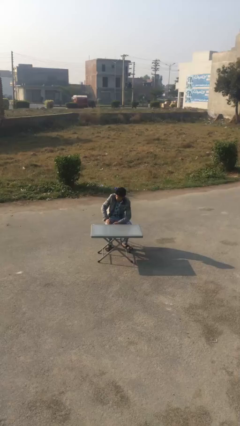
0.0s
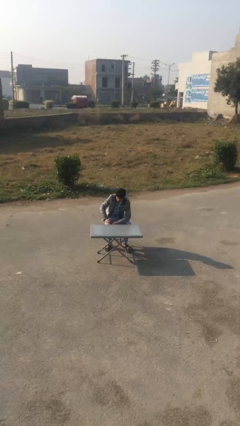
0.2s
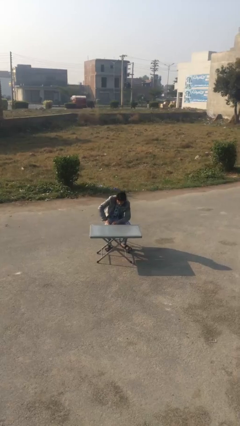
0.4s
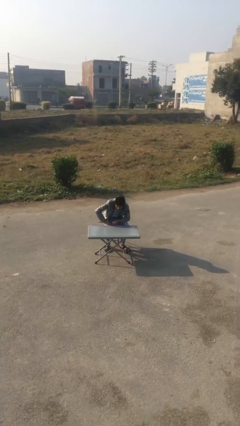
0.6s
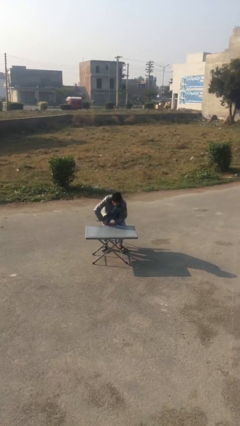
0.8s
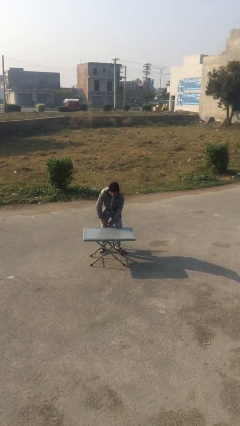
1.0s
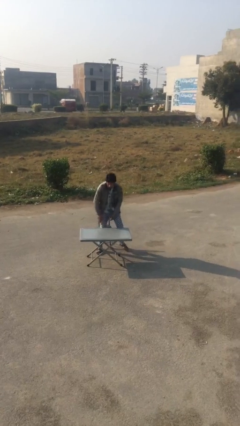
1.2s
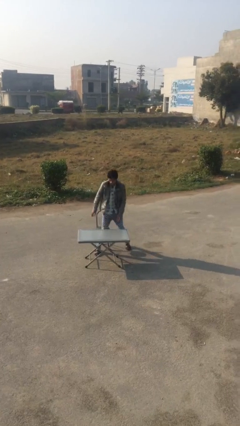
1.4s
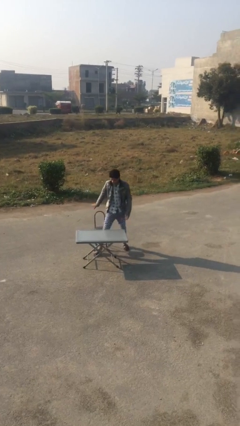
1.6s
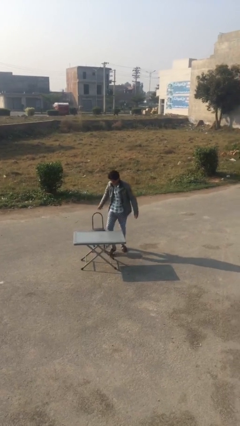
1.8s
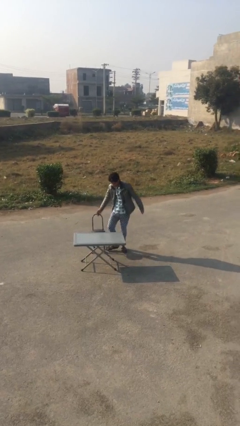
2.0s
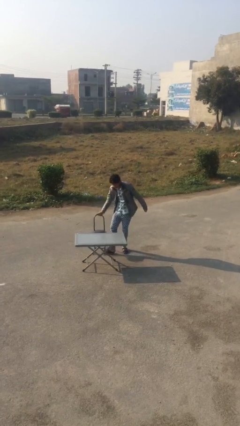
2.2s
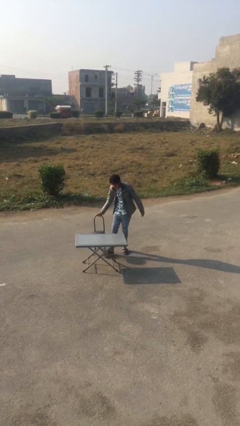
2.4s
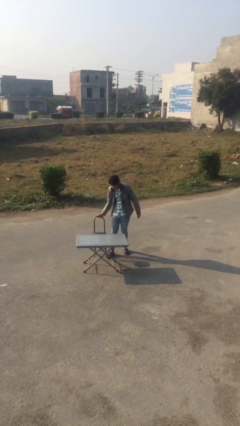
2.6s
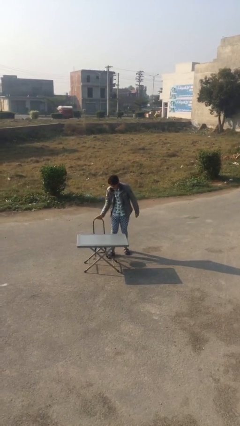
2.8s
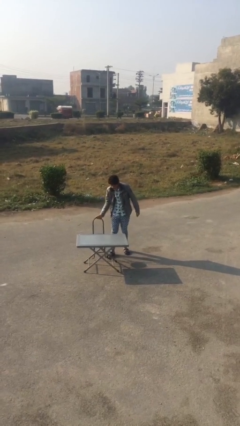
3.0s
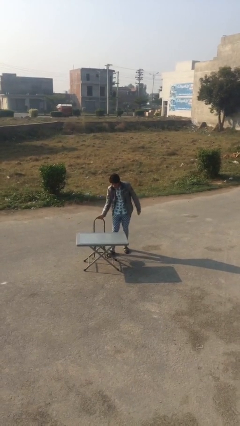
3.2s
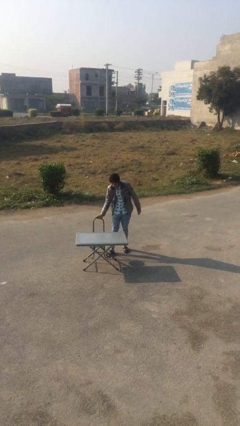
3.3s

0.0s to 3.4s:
person stands up

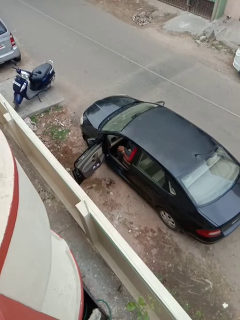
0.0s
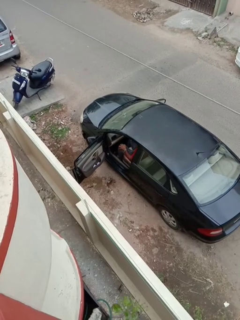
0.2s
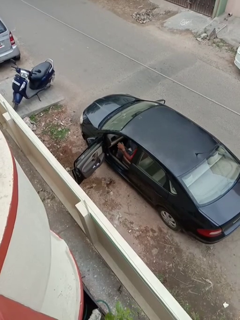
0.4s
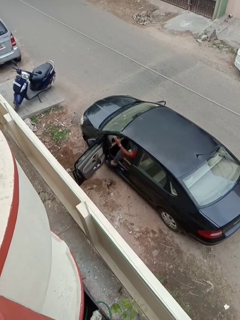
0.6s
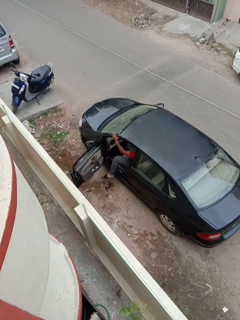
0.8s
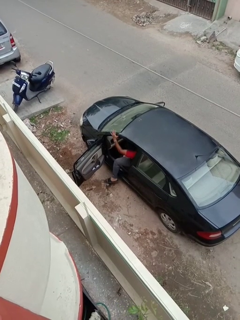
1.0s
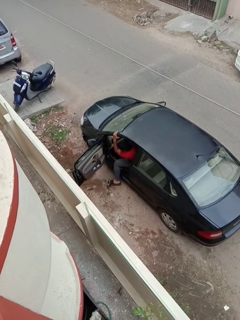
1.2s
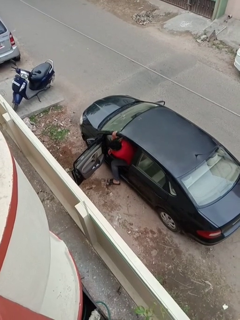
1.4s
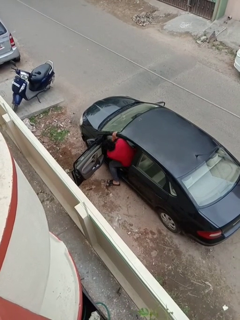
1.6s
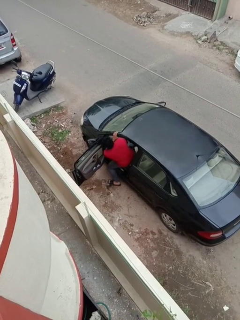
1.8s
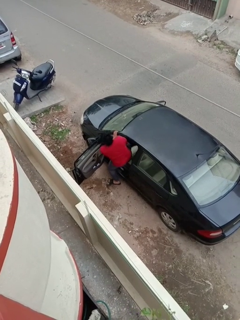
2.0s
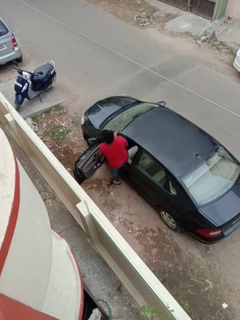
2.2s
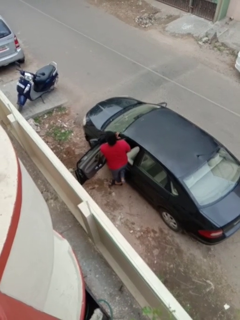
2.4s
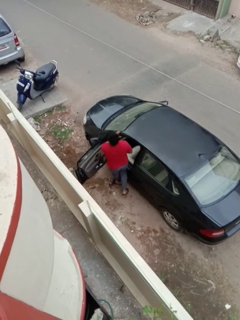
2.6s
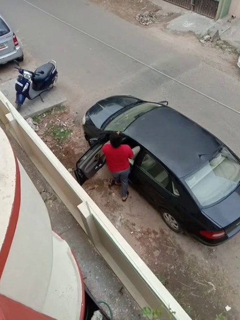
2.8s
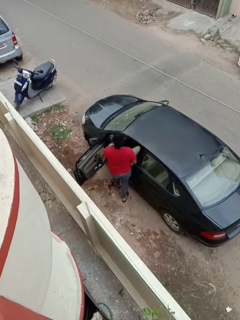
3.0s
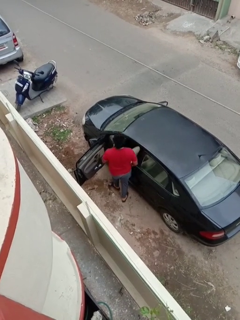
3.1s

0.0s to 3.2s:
person exits car

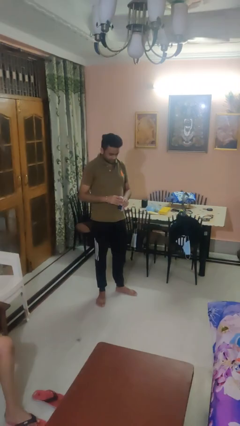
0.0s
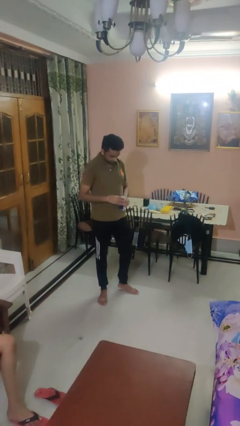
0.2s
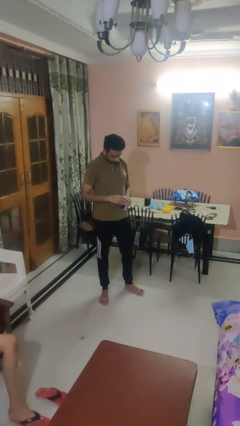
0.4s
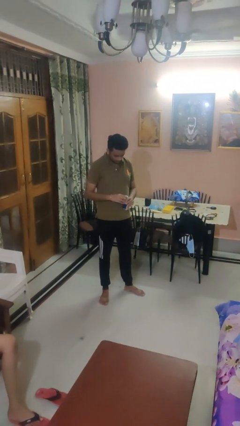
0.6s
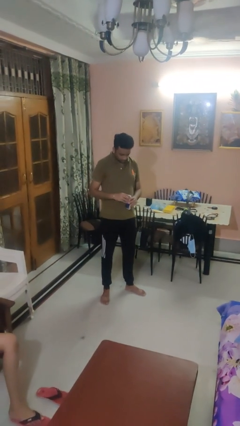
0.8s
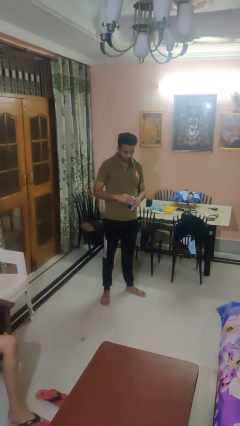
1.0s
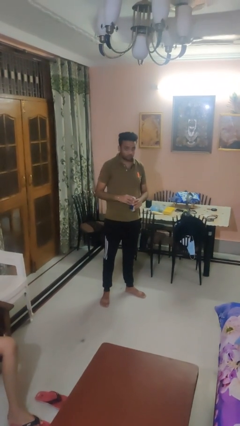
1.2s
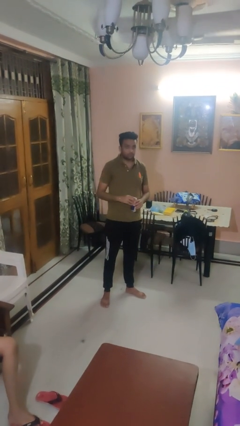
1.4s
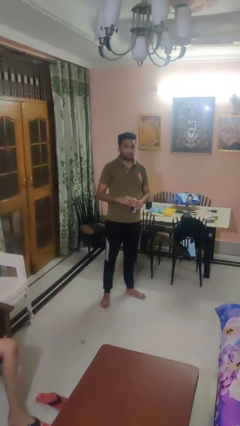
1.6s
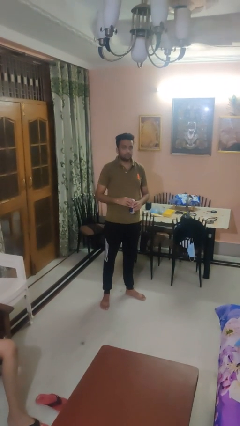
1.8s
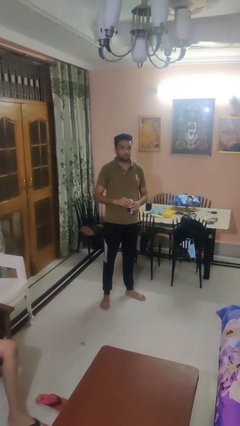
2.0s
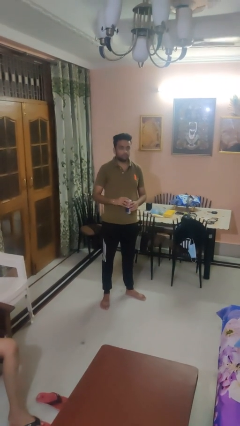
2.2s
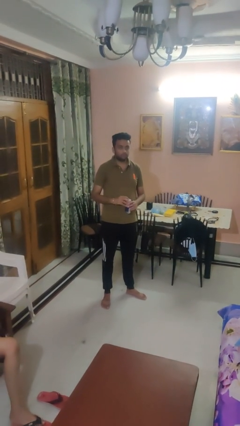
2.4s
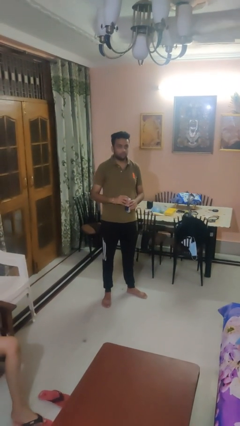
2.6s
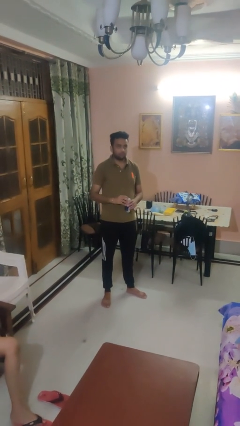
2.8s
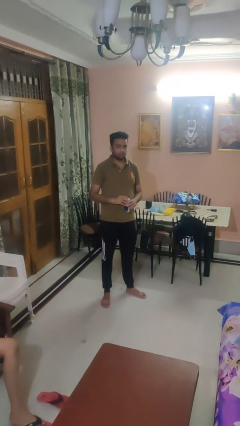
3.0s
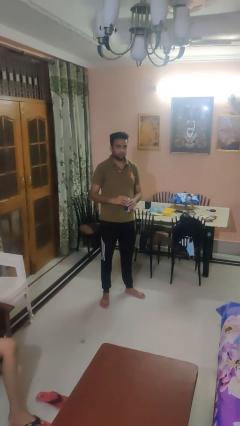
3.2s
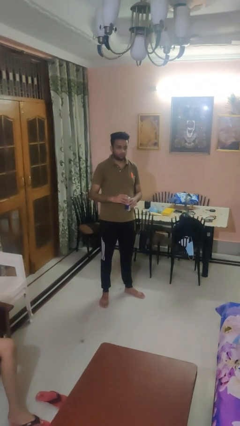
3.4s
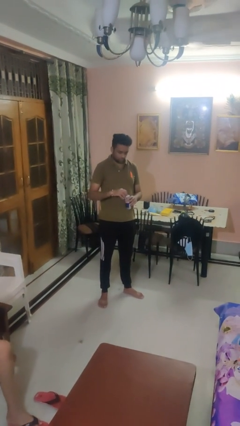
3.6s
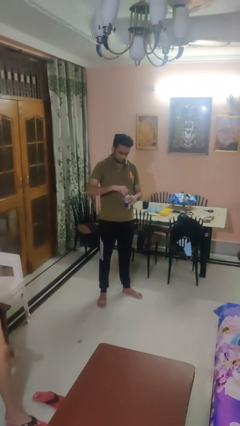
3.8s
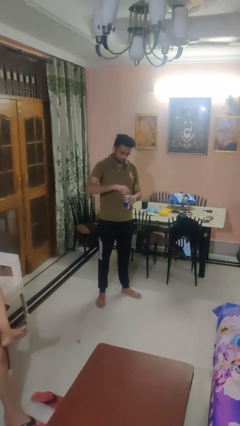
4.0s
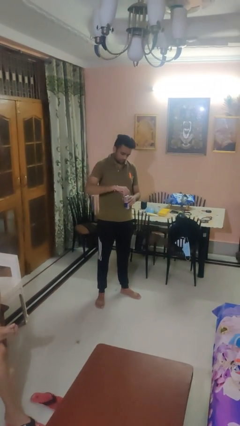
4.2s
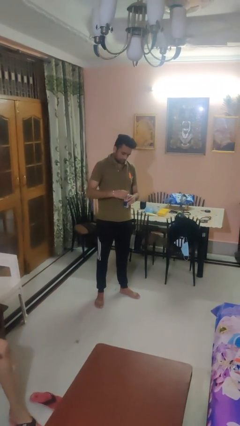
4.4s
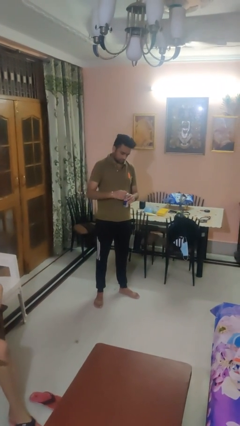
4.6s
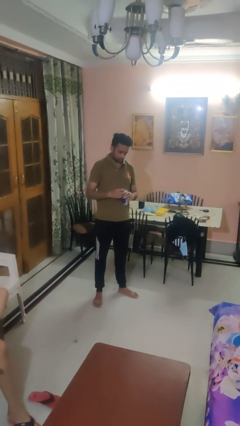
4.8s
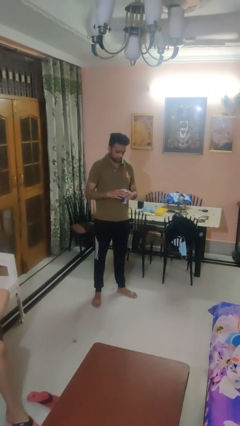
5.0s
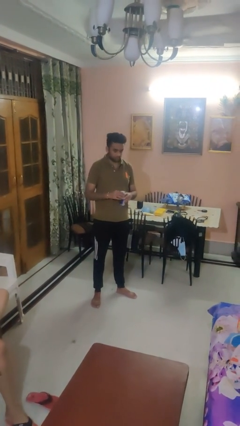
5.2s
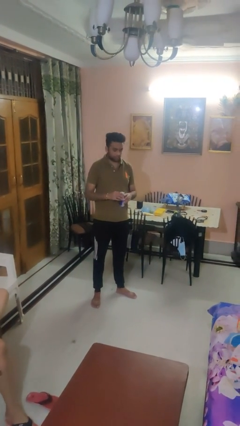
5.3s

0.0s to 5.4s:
person opens beverage can

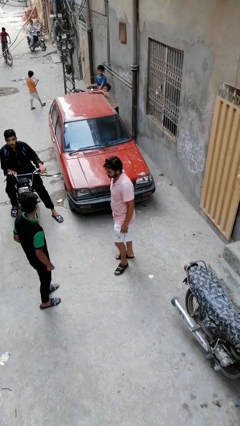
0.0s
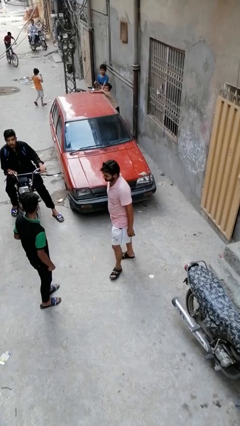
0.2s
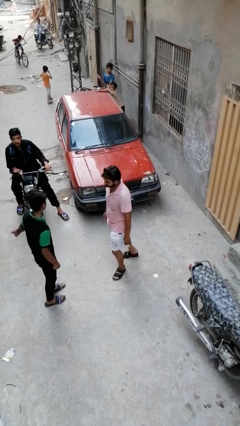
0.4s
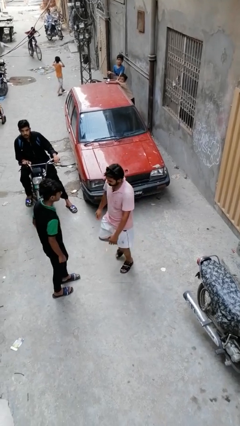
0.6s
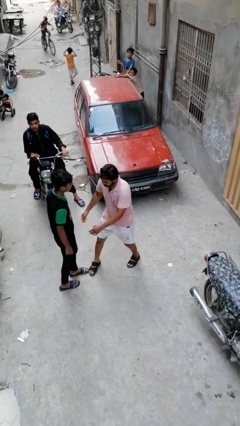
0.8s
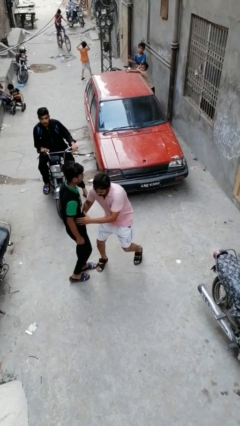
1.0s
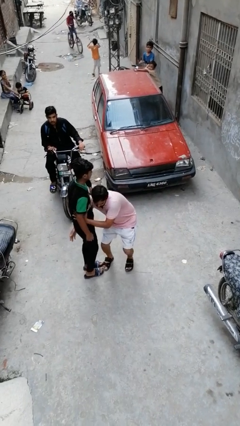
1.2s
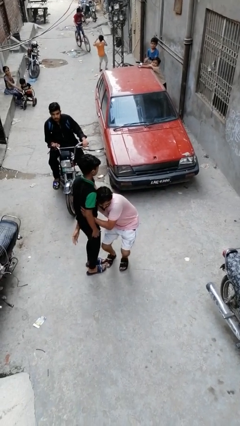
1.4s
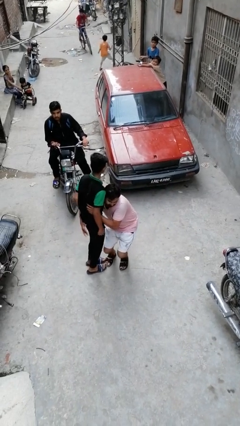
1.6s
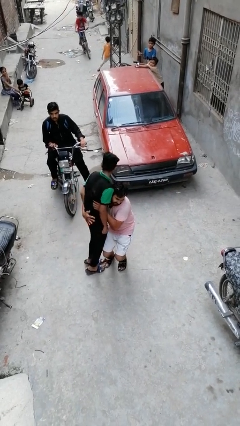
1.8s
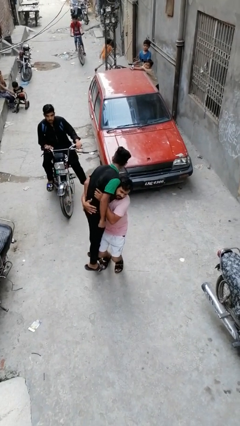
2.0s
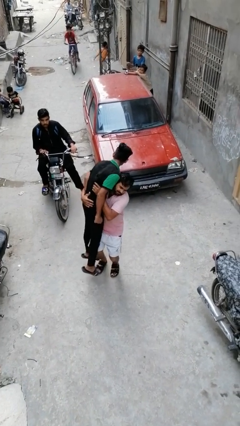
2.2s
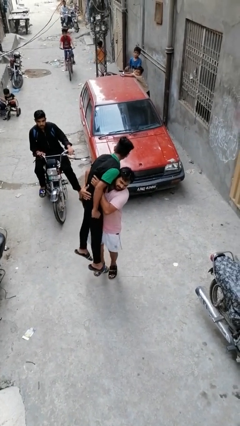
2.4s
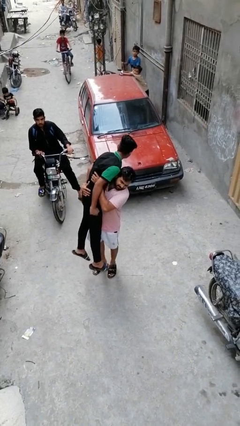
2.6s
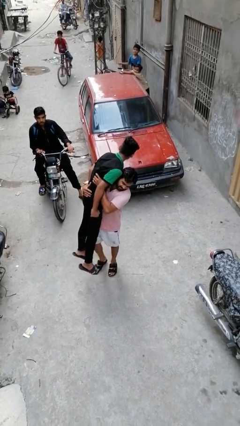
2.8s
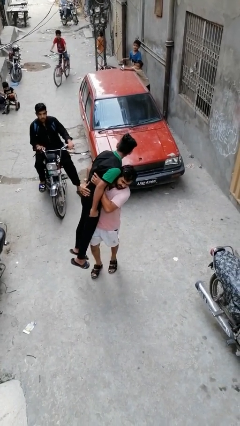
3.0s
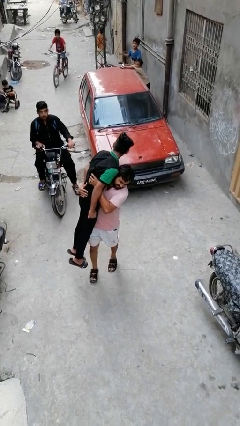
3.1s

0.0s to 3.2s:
person picks up person

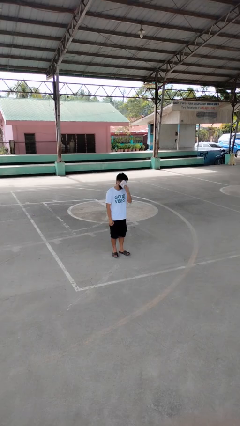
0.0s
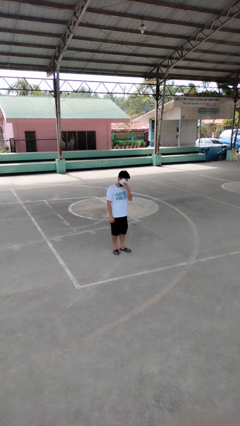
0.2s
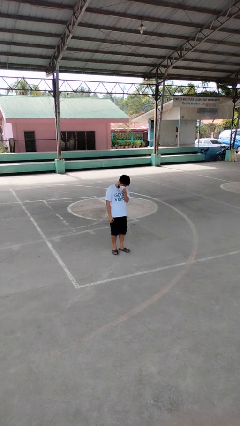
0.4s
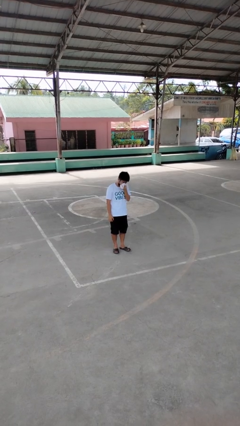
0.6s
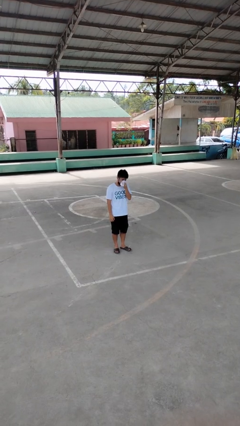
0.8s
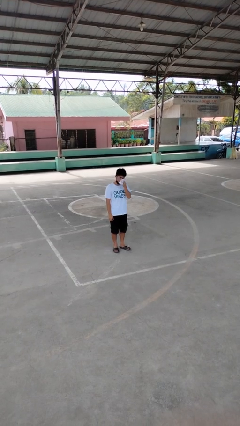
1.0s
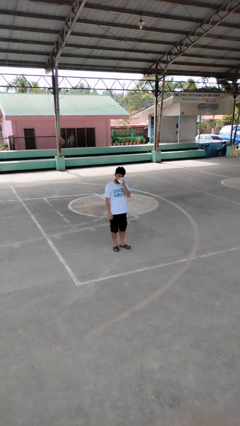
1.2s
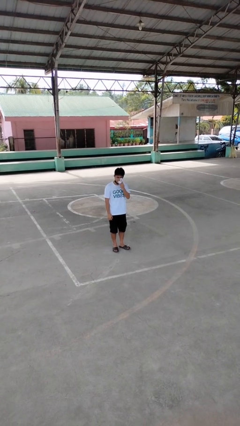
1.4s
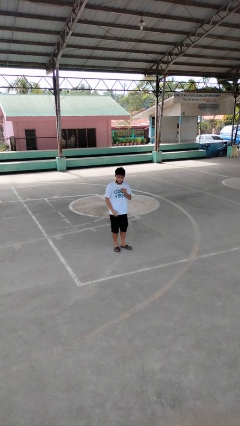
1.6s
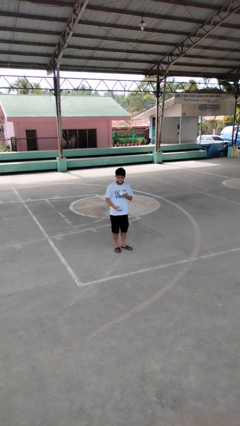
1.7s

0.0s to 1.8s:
person blows nose

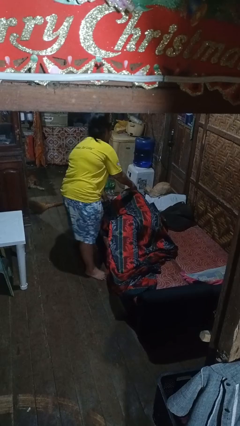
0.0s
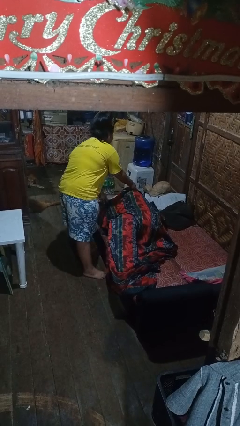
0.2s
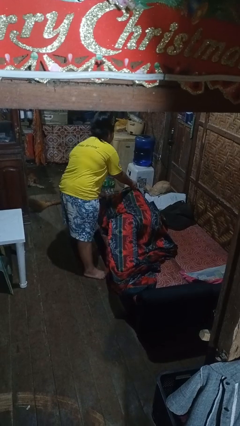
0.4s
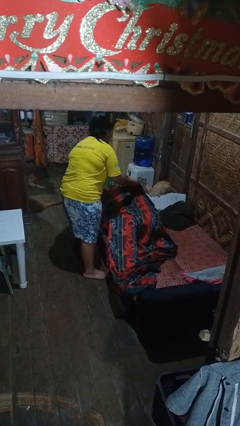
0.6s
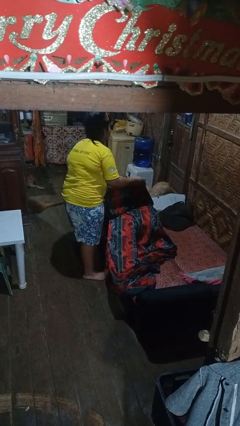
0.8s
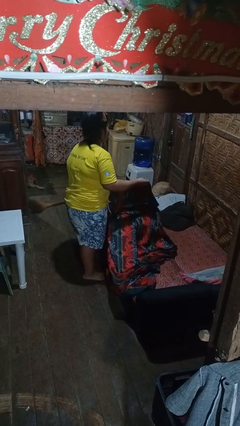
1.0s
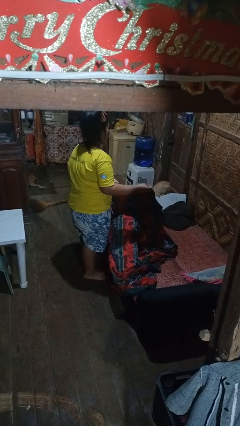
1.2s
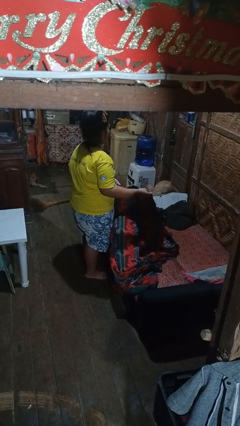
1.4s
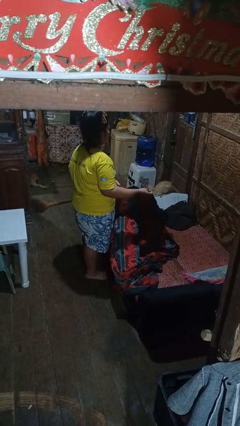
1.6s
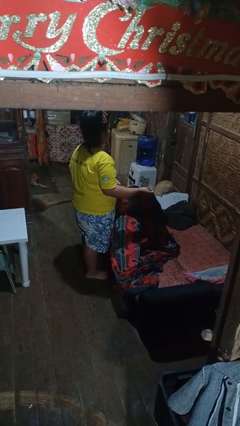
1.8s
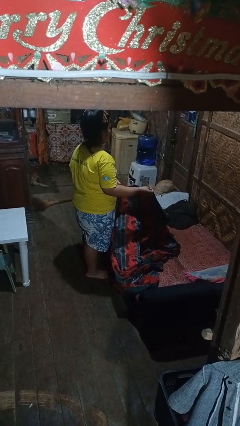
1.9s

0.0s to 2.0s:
person uncovers friend with blanket
